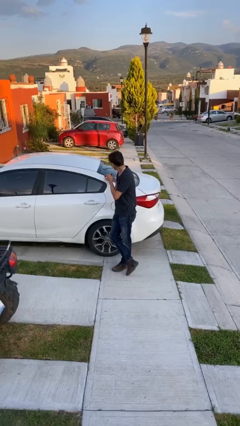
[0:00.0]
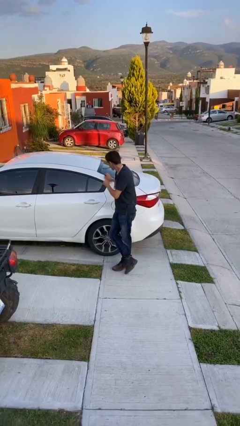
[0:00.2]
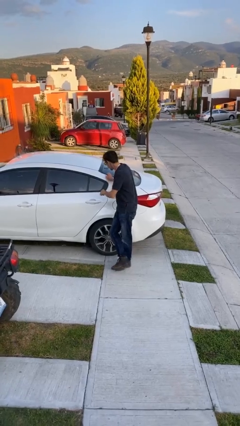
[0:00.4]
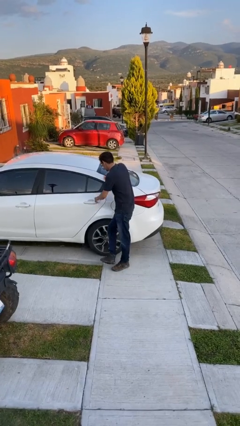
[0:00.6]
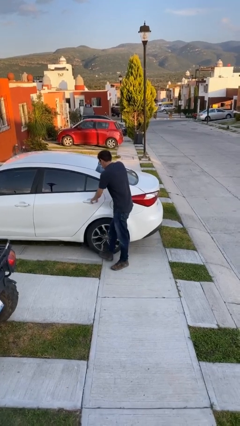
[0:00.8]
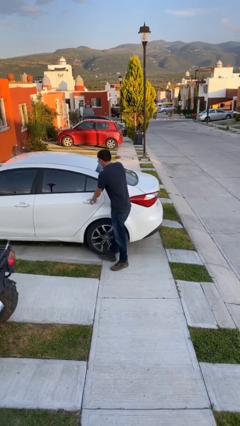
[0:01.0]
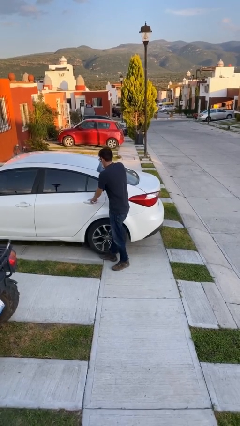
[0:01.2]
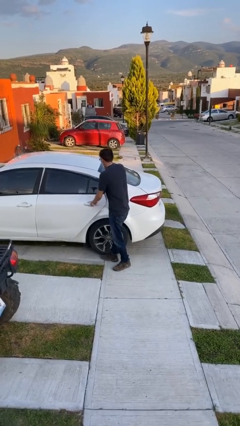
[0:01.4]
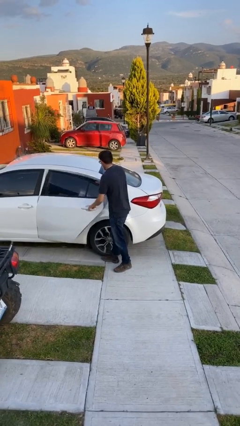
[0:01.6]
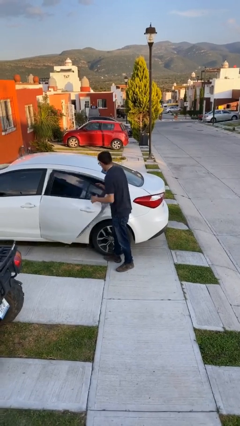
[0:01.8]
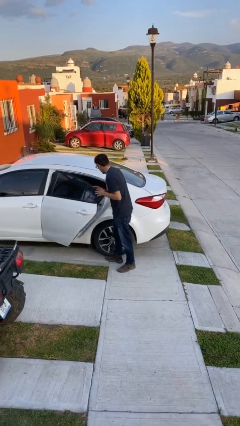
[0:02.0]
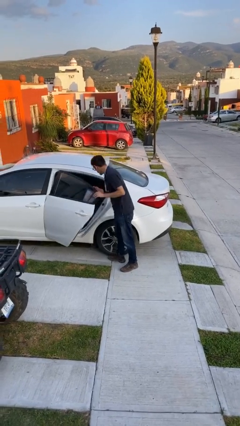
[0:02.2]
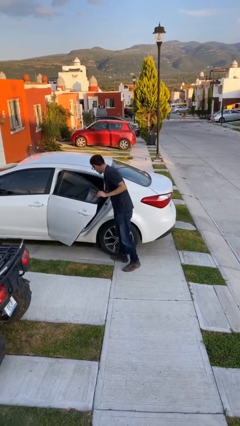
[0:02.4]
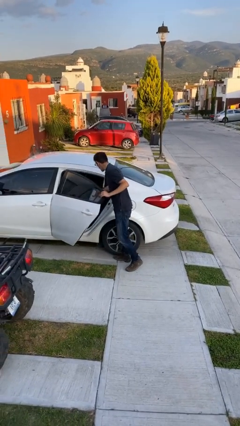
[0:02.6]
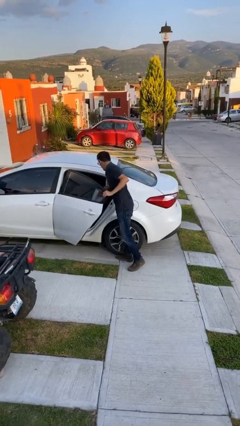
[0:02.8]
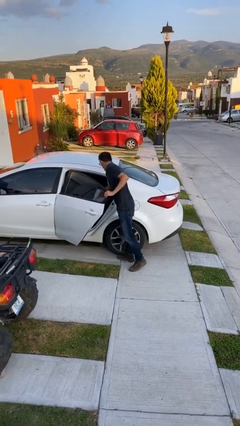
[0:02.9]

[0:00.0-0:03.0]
person opens car door

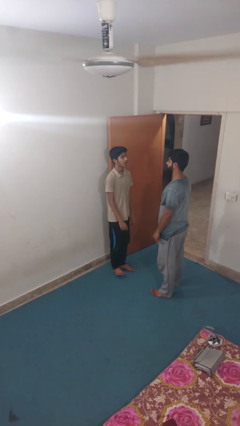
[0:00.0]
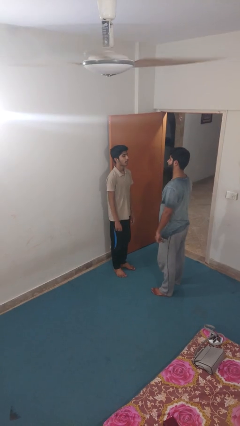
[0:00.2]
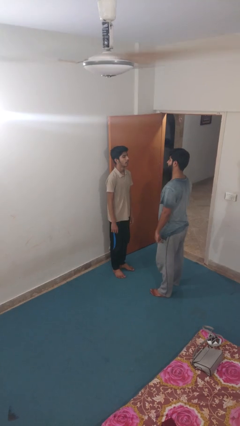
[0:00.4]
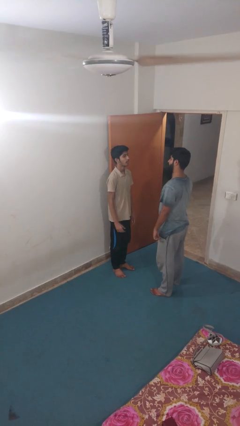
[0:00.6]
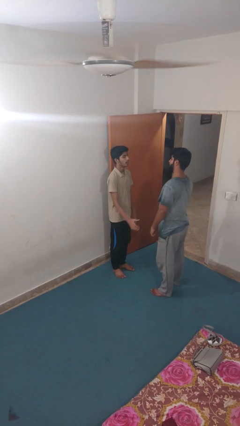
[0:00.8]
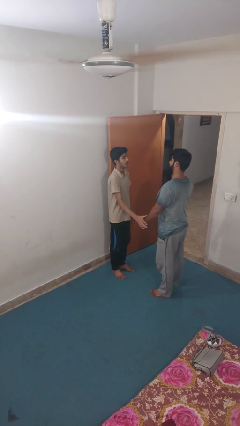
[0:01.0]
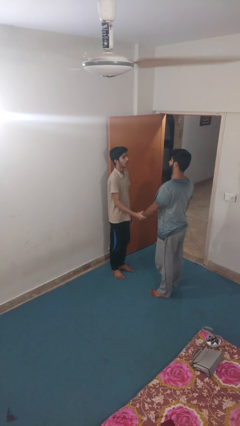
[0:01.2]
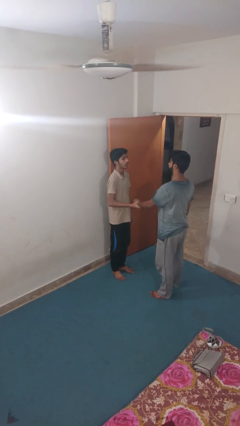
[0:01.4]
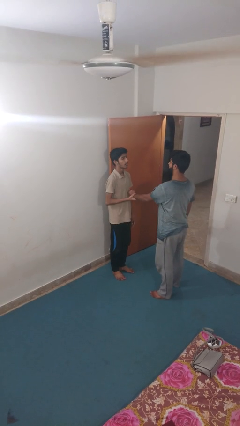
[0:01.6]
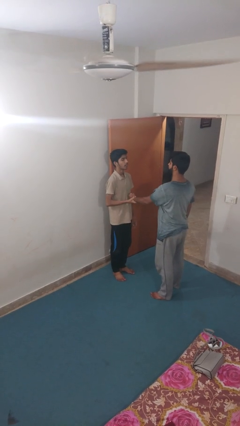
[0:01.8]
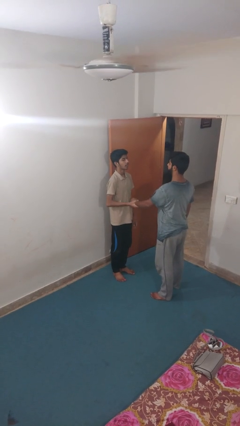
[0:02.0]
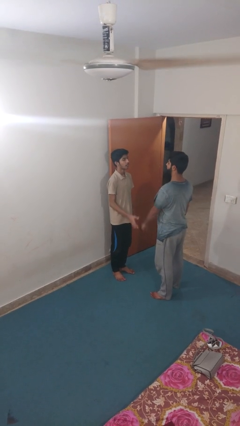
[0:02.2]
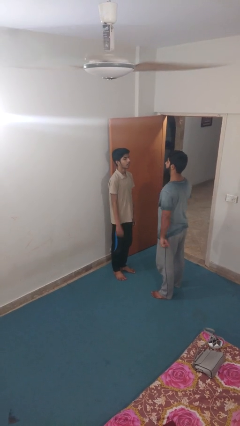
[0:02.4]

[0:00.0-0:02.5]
person grabs person by forearm

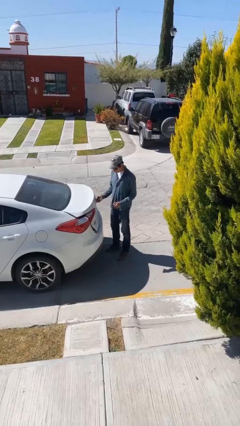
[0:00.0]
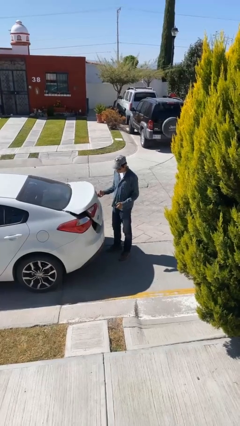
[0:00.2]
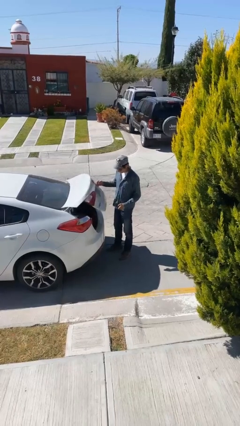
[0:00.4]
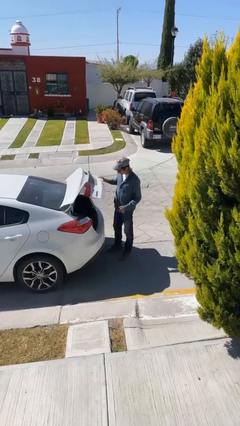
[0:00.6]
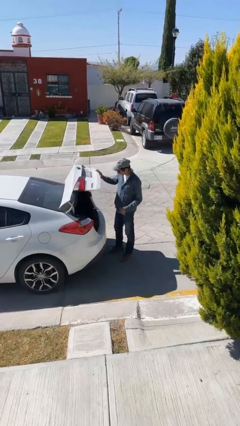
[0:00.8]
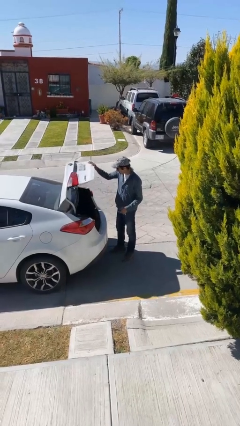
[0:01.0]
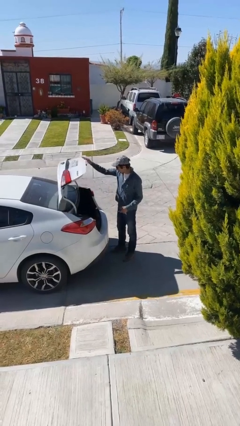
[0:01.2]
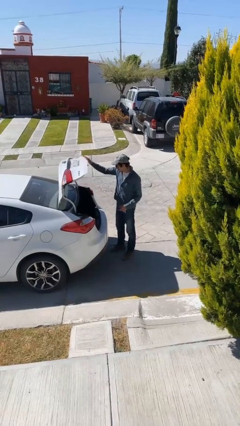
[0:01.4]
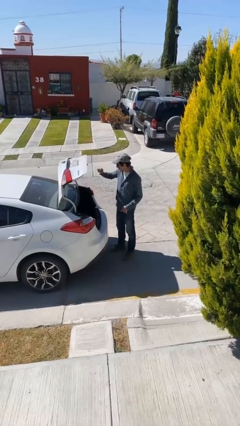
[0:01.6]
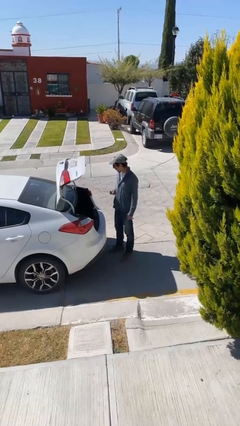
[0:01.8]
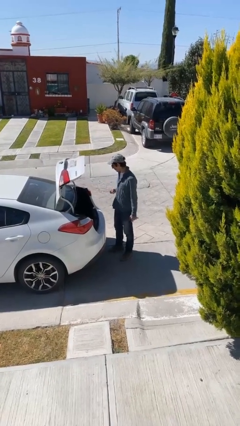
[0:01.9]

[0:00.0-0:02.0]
person opens car trunk

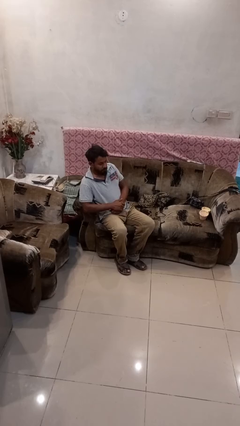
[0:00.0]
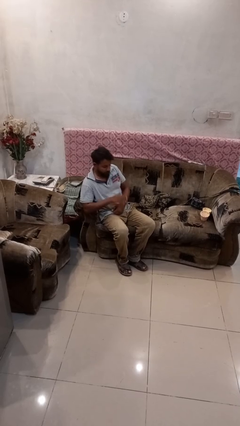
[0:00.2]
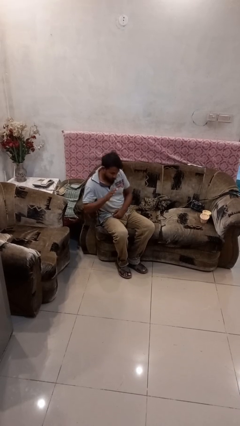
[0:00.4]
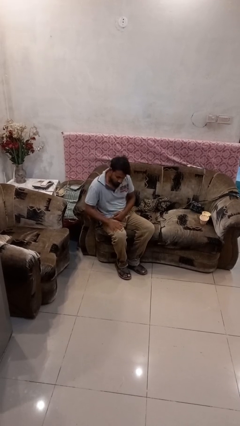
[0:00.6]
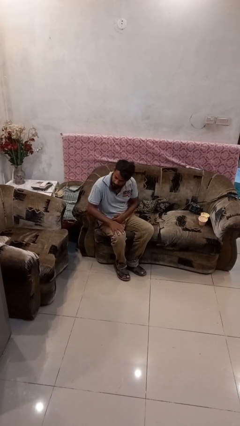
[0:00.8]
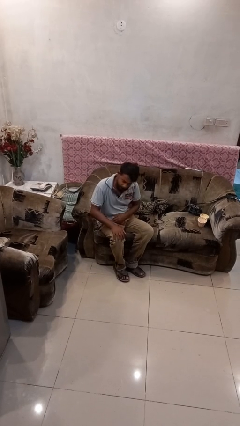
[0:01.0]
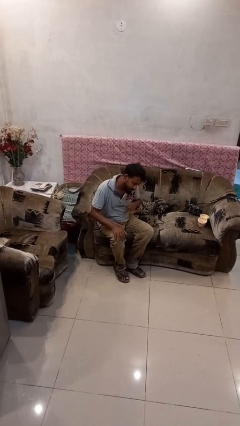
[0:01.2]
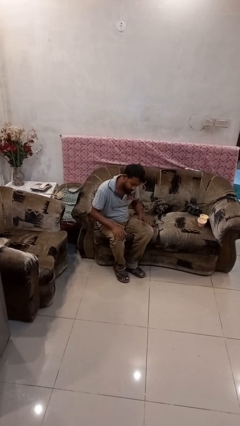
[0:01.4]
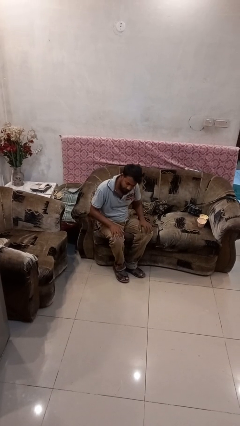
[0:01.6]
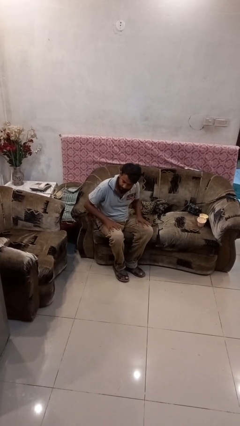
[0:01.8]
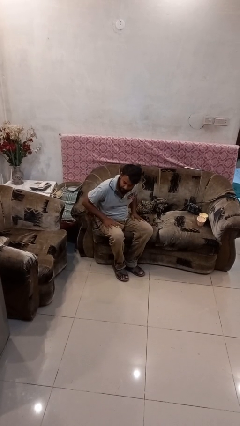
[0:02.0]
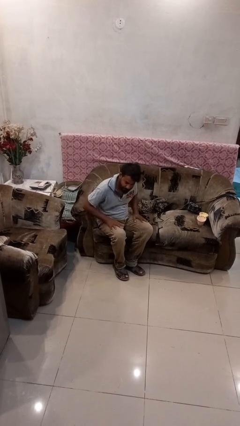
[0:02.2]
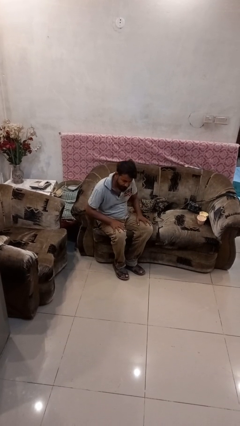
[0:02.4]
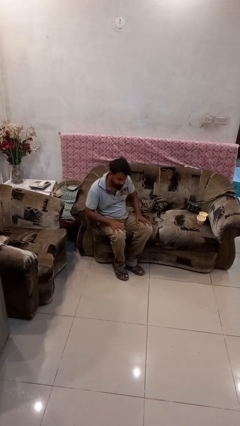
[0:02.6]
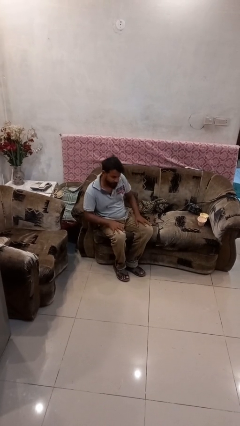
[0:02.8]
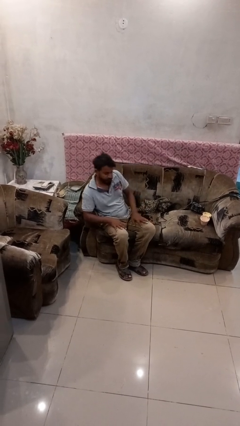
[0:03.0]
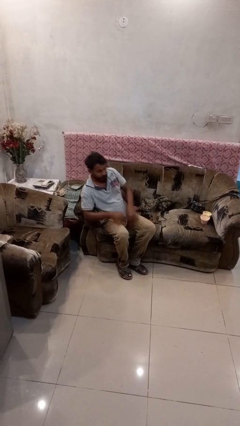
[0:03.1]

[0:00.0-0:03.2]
person slaps hands on thighs

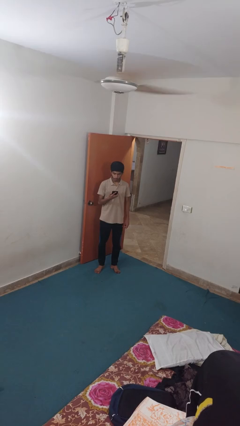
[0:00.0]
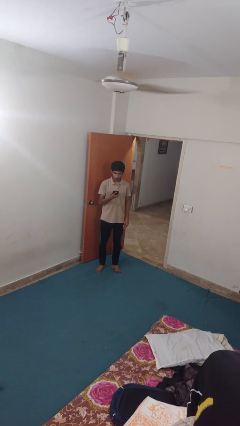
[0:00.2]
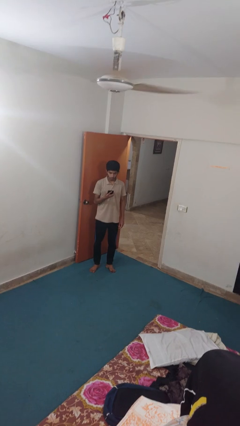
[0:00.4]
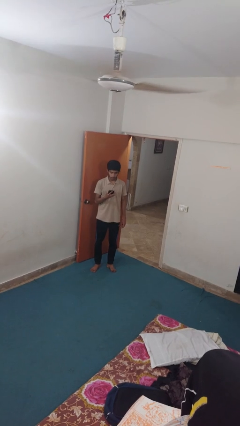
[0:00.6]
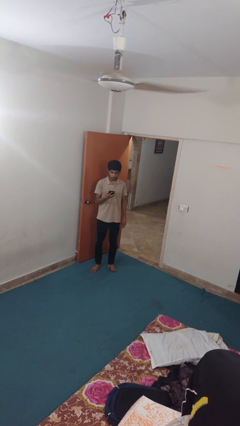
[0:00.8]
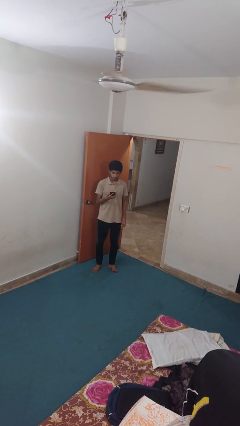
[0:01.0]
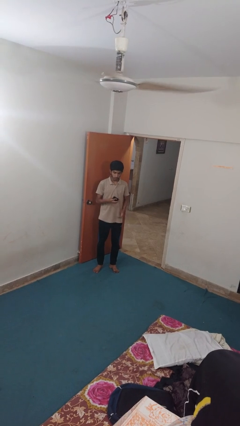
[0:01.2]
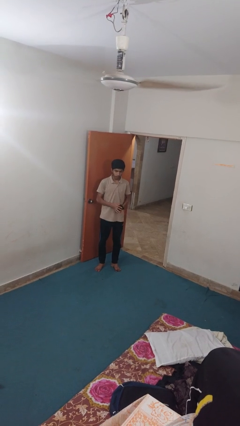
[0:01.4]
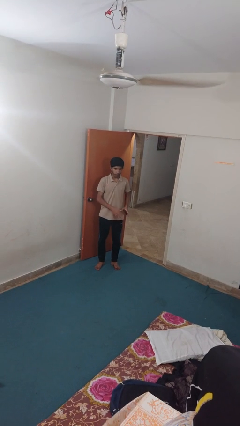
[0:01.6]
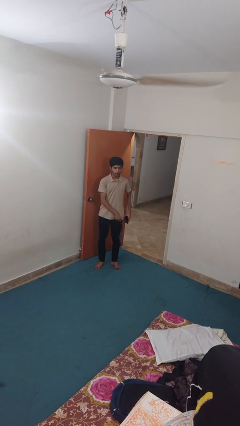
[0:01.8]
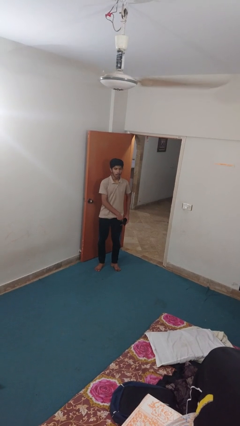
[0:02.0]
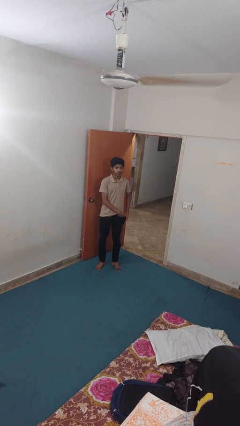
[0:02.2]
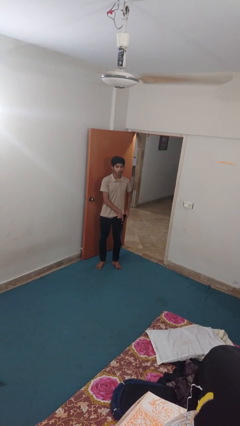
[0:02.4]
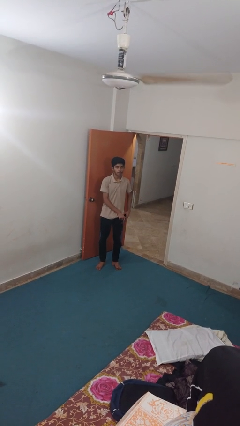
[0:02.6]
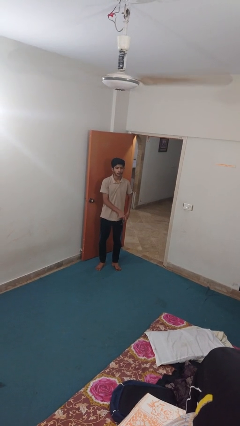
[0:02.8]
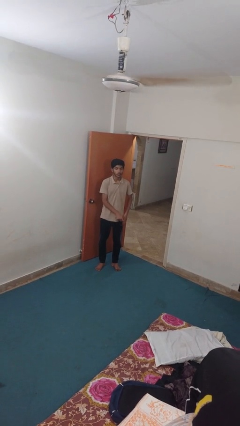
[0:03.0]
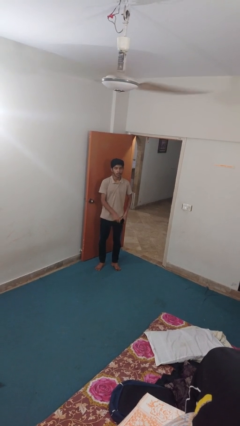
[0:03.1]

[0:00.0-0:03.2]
person puts phone into pocket

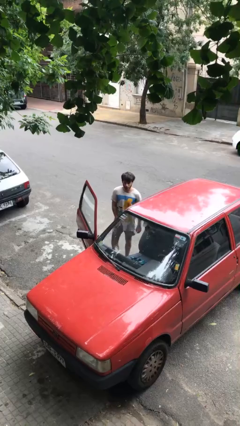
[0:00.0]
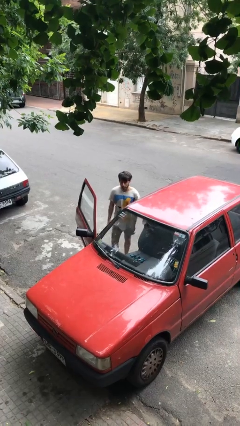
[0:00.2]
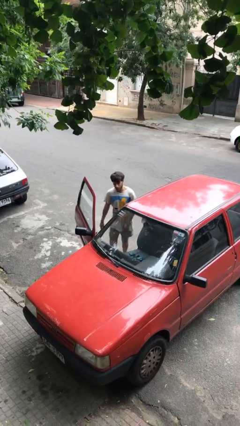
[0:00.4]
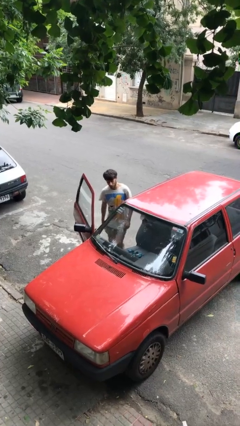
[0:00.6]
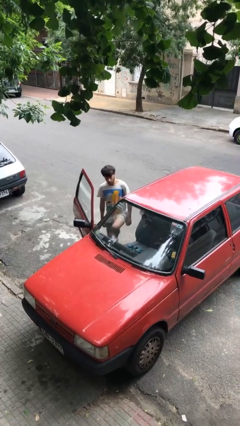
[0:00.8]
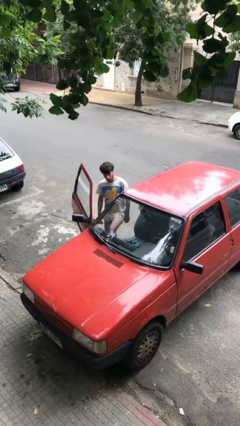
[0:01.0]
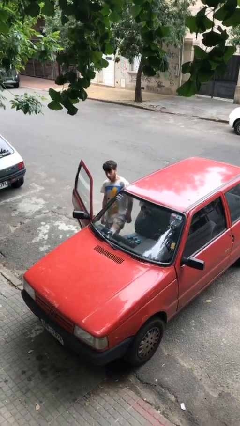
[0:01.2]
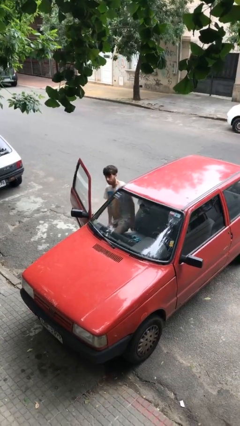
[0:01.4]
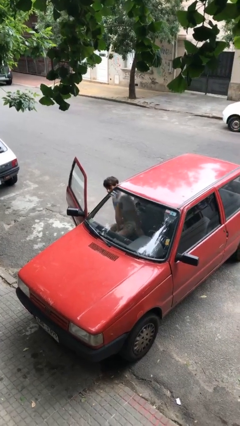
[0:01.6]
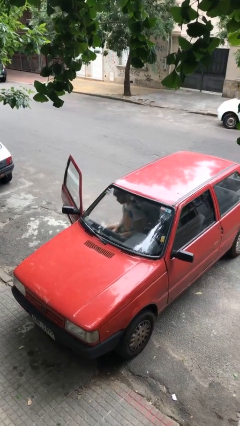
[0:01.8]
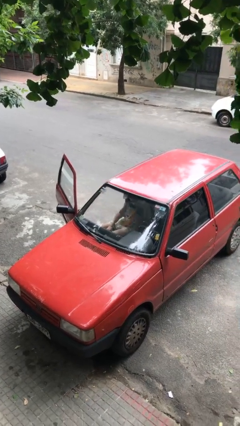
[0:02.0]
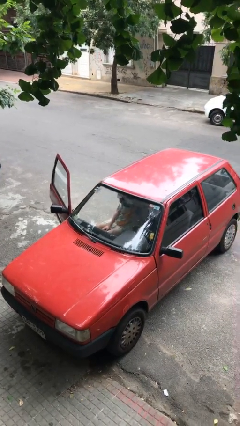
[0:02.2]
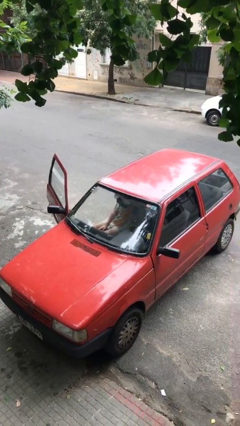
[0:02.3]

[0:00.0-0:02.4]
person enters car

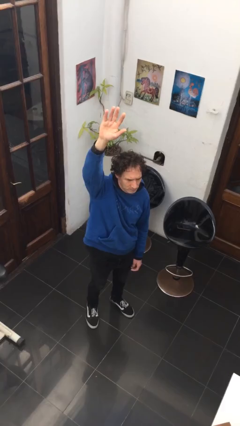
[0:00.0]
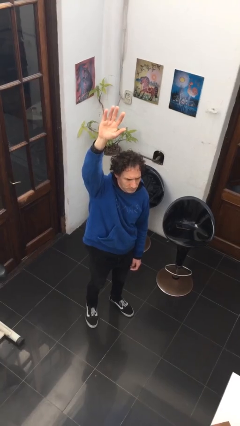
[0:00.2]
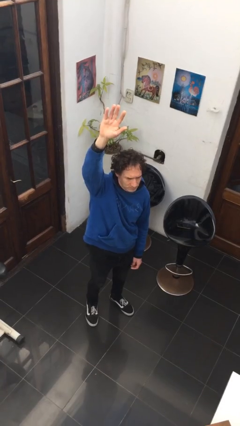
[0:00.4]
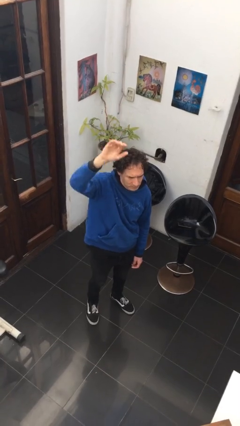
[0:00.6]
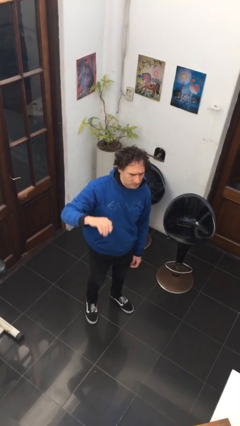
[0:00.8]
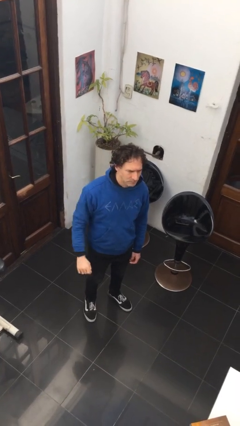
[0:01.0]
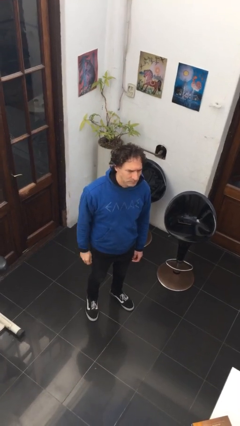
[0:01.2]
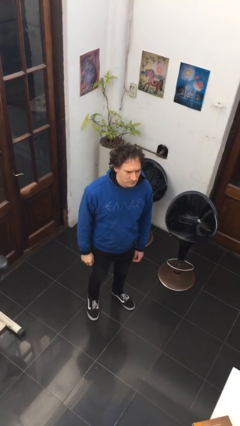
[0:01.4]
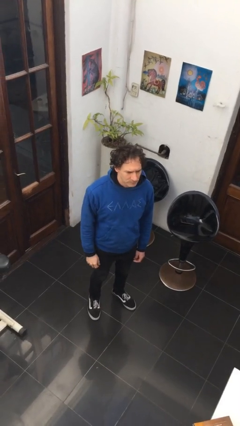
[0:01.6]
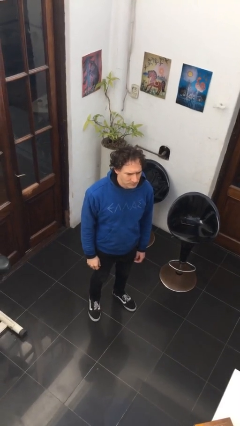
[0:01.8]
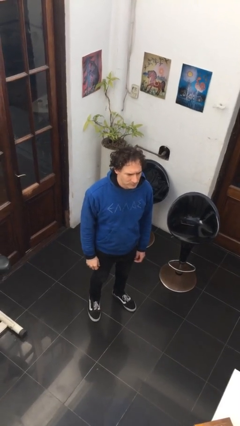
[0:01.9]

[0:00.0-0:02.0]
person gestures lower hand
